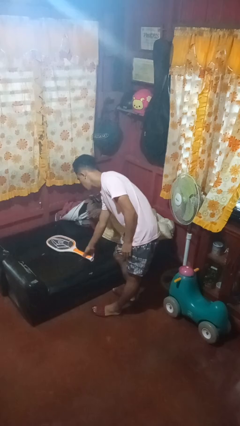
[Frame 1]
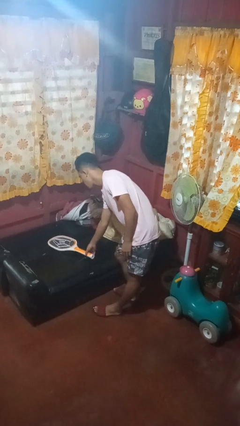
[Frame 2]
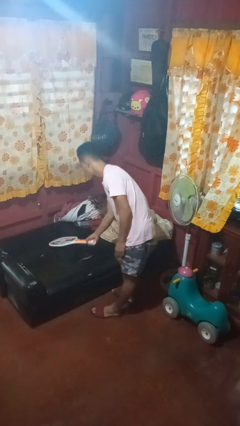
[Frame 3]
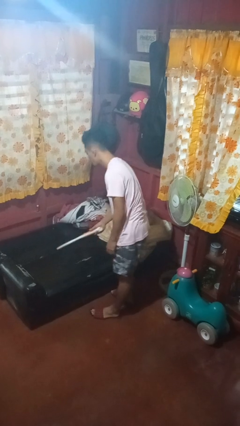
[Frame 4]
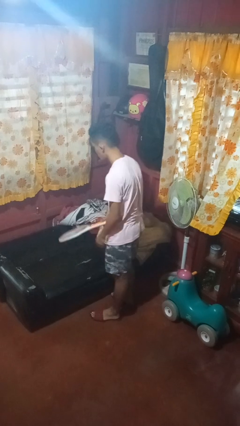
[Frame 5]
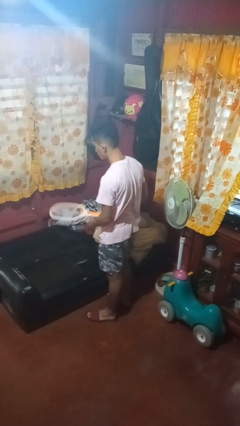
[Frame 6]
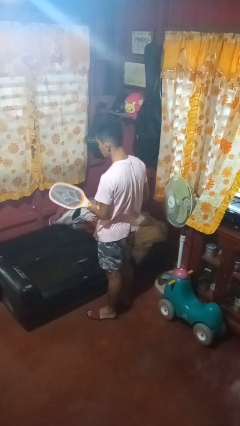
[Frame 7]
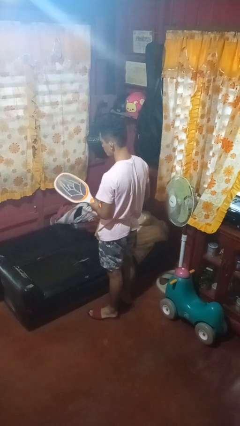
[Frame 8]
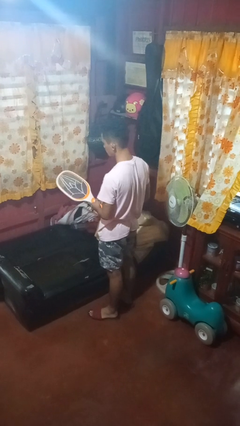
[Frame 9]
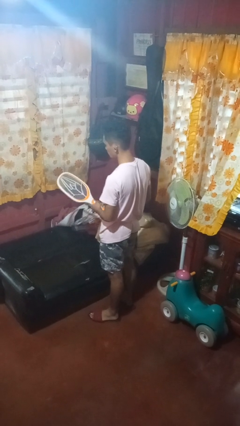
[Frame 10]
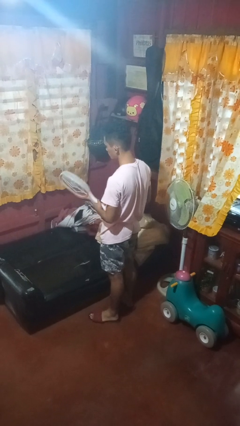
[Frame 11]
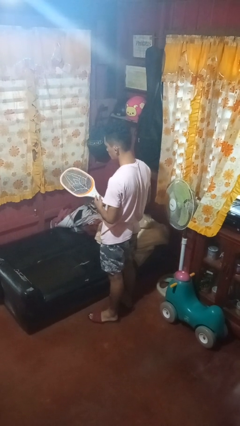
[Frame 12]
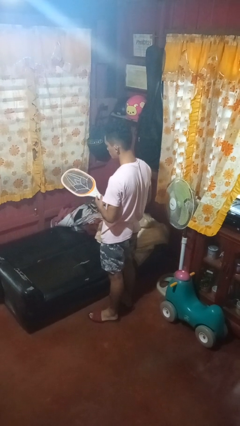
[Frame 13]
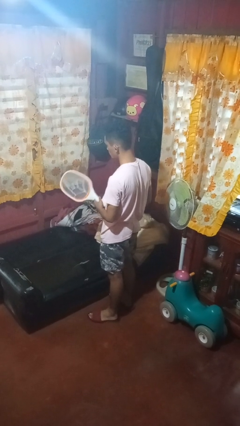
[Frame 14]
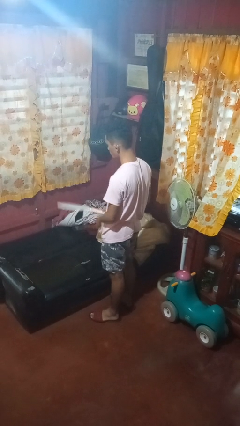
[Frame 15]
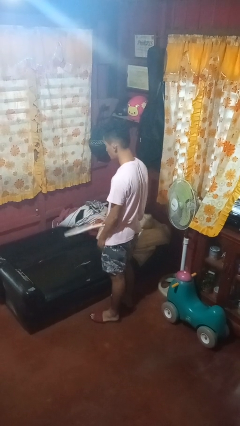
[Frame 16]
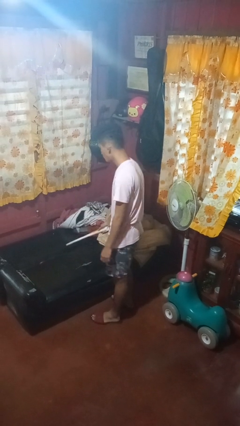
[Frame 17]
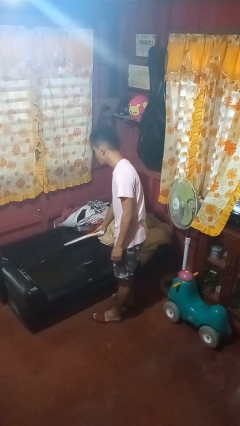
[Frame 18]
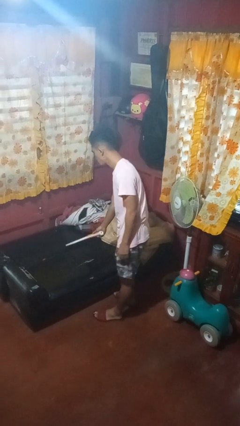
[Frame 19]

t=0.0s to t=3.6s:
person picks up object from couch

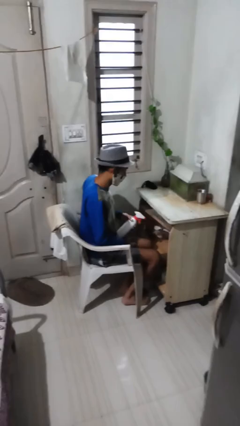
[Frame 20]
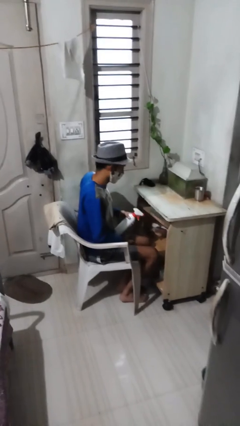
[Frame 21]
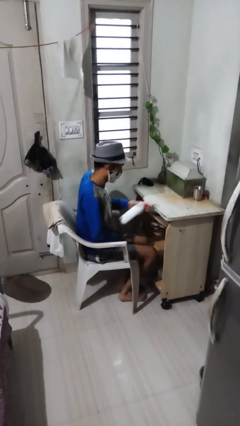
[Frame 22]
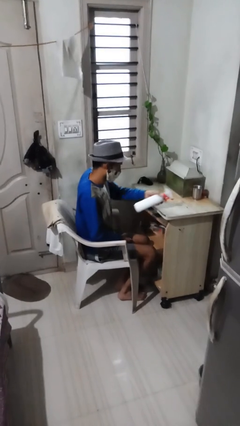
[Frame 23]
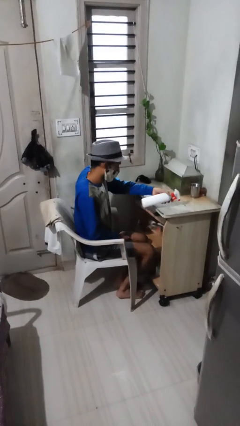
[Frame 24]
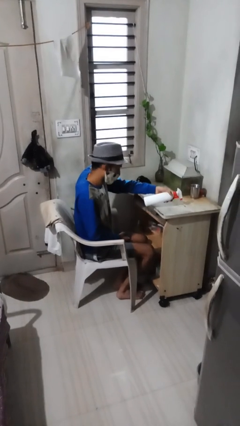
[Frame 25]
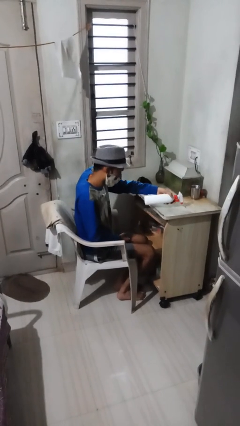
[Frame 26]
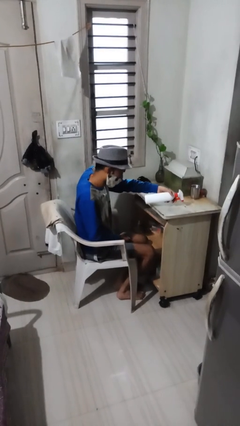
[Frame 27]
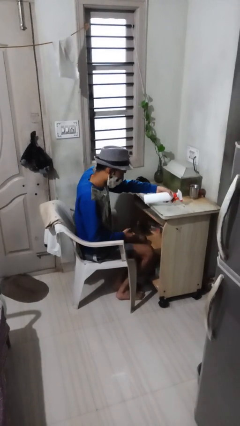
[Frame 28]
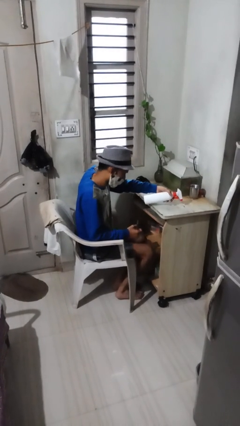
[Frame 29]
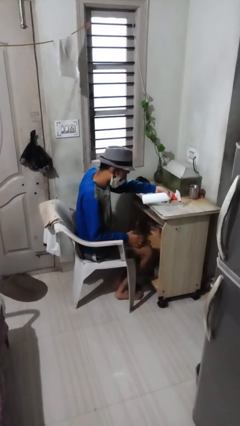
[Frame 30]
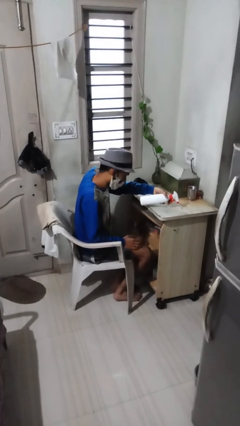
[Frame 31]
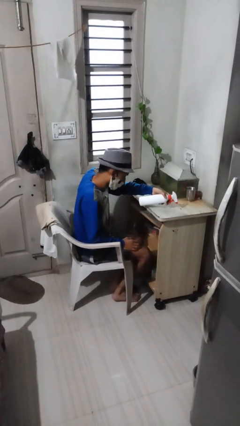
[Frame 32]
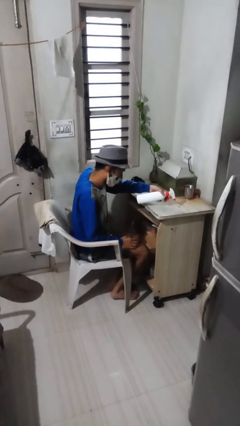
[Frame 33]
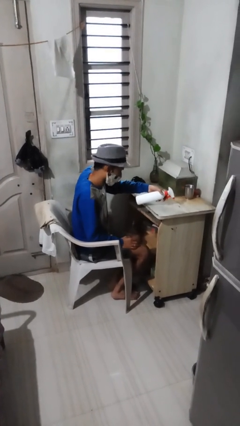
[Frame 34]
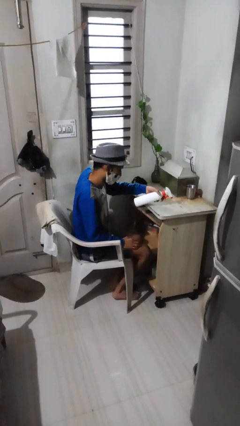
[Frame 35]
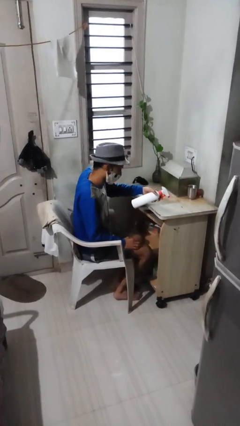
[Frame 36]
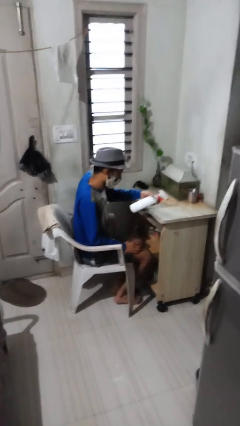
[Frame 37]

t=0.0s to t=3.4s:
person sprays from bottle

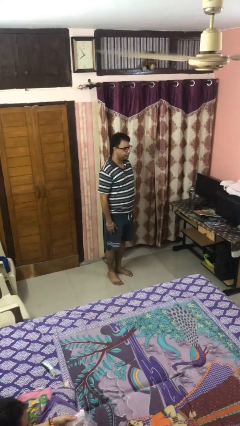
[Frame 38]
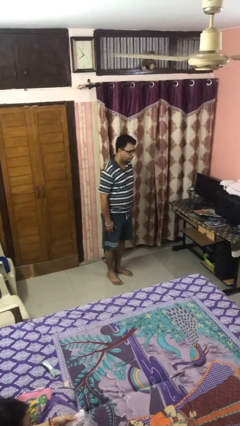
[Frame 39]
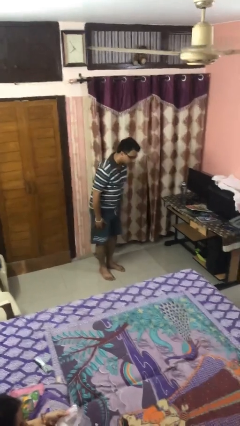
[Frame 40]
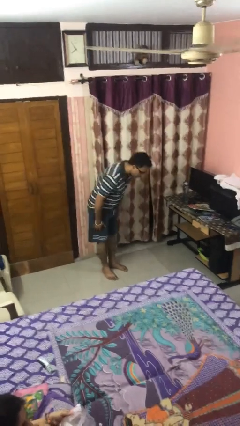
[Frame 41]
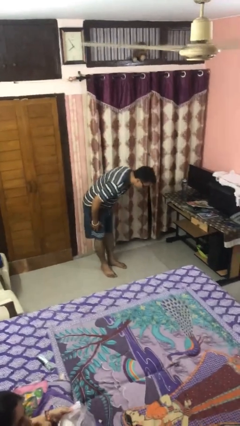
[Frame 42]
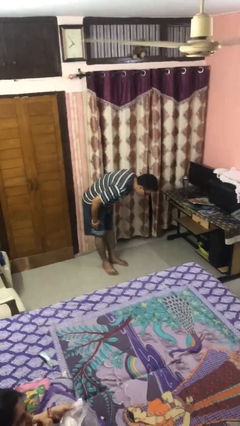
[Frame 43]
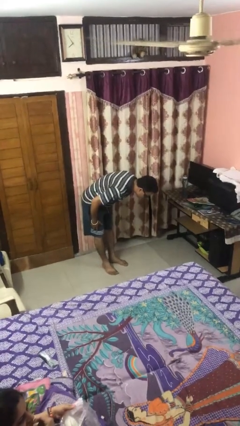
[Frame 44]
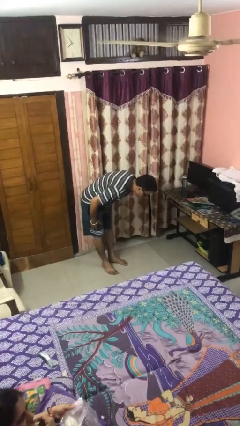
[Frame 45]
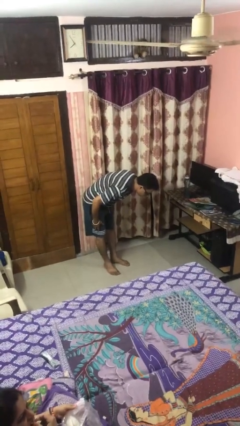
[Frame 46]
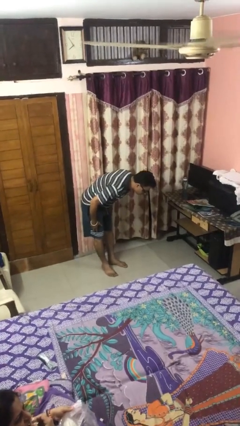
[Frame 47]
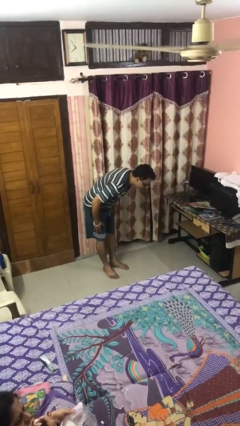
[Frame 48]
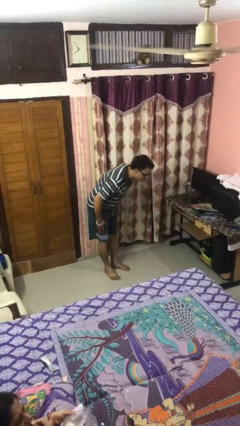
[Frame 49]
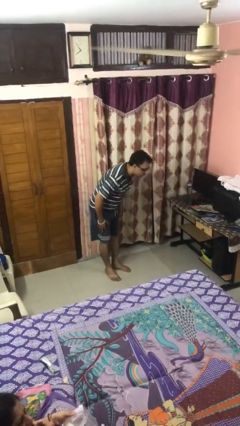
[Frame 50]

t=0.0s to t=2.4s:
person bows

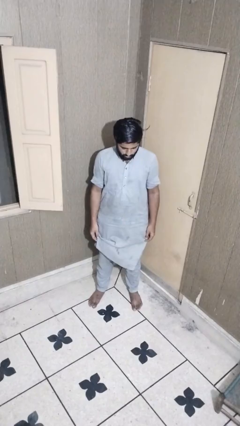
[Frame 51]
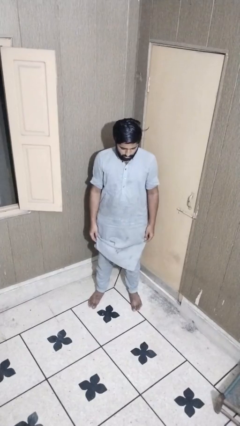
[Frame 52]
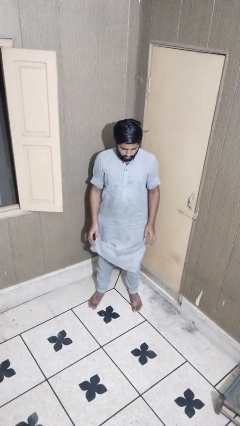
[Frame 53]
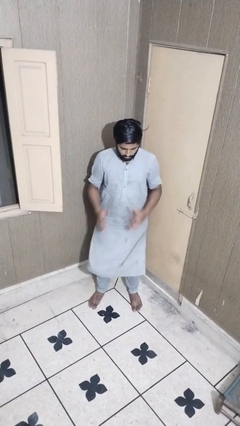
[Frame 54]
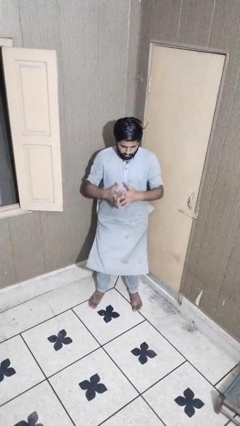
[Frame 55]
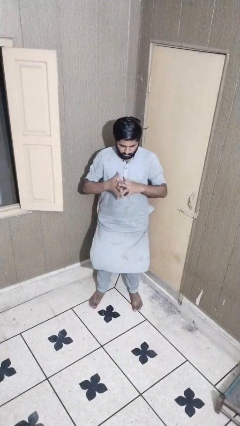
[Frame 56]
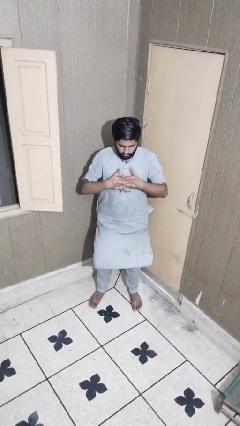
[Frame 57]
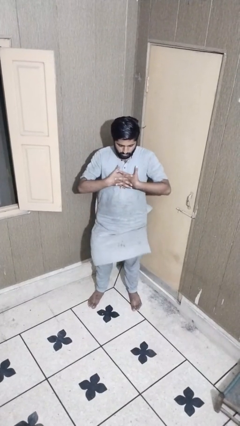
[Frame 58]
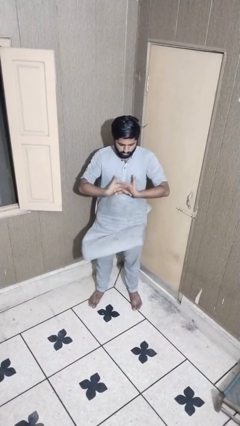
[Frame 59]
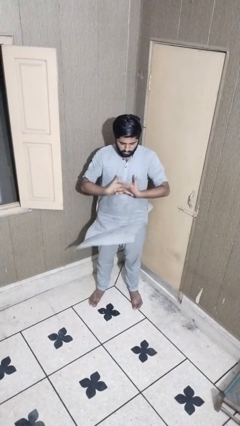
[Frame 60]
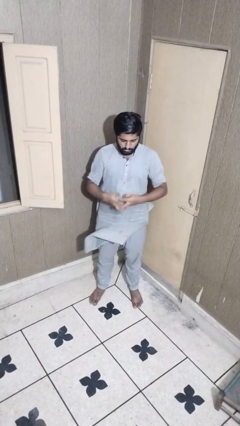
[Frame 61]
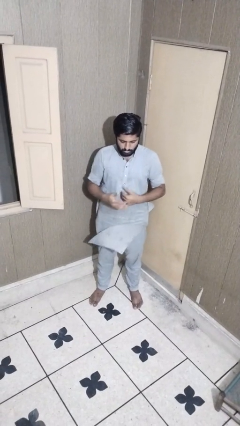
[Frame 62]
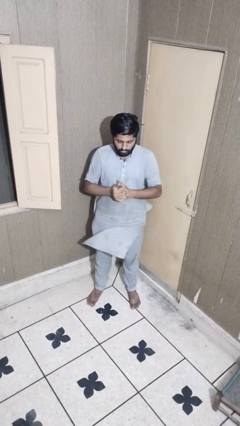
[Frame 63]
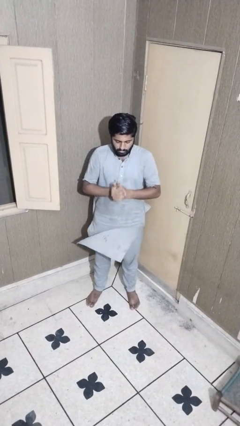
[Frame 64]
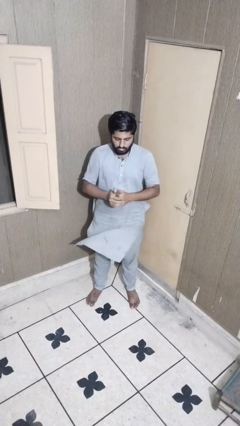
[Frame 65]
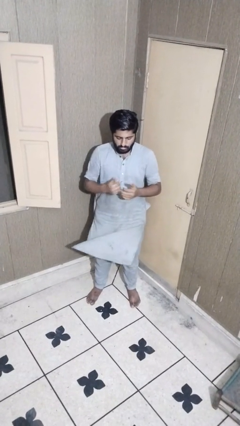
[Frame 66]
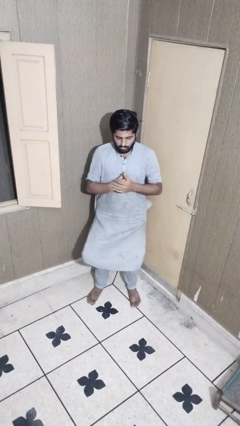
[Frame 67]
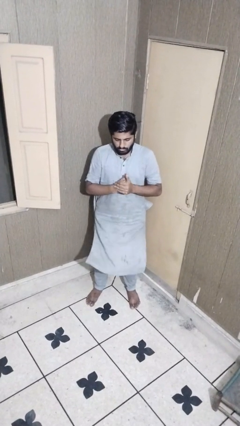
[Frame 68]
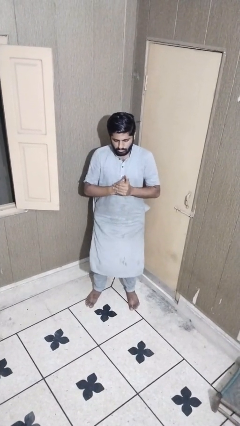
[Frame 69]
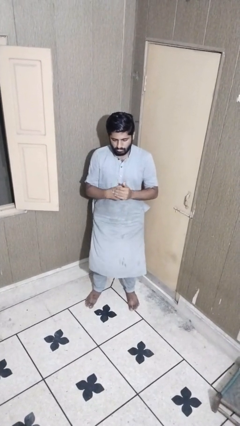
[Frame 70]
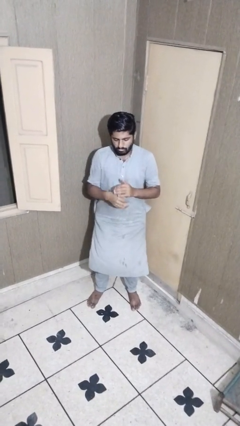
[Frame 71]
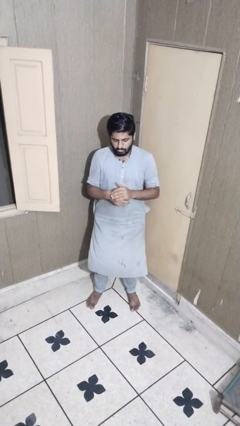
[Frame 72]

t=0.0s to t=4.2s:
person cracks knuckles

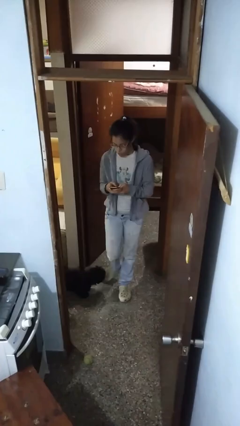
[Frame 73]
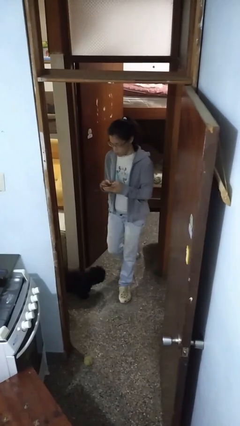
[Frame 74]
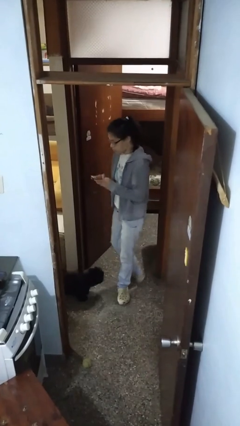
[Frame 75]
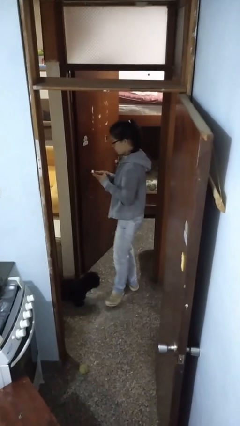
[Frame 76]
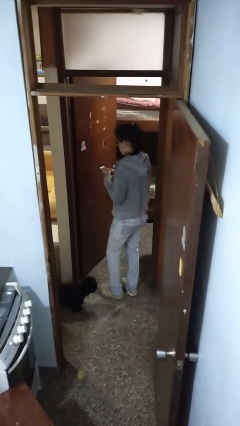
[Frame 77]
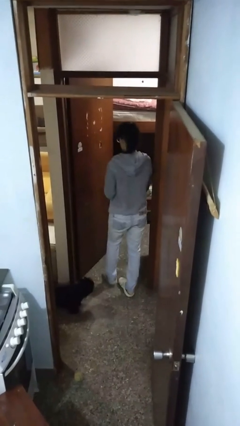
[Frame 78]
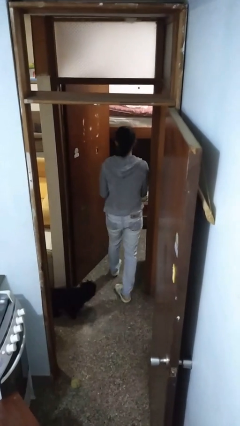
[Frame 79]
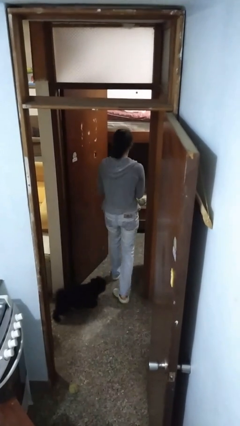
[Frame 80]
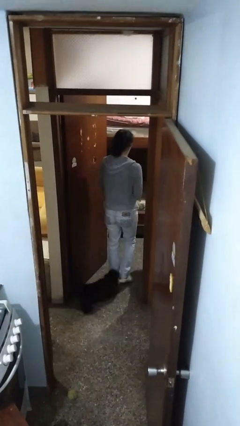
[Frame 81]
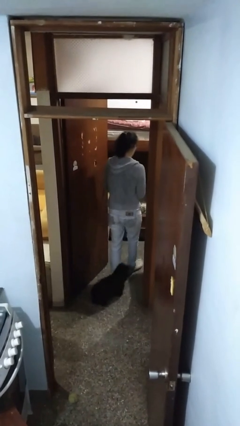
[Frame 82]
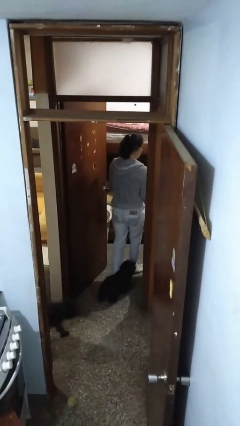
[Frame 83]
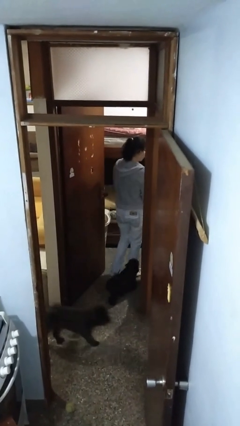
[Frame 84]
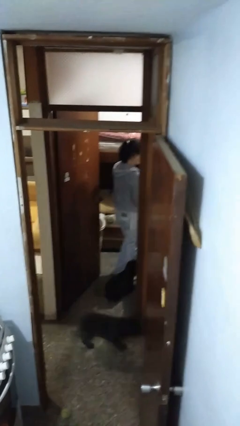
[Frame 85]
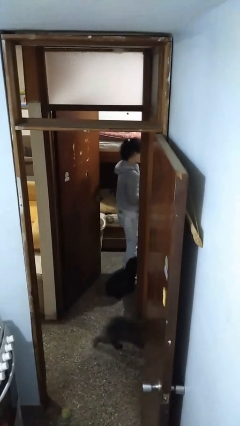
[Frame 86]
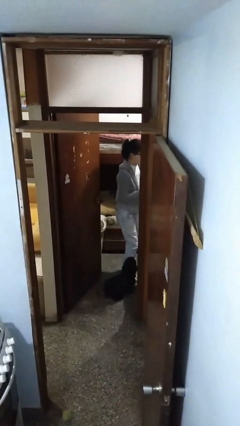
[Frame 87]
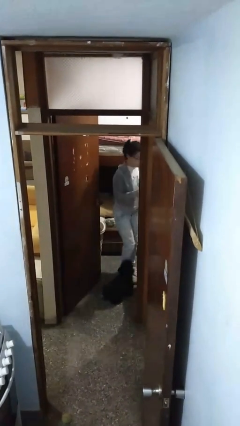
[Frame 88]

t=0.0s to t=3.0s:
person exits scene through structure

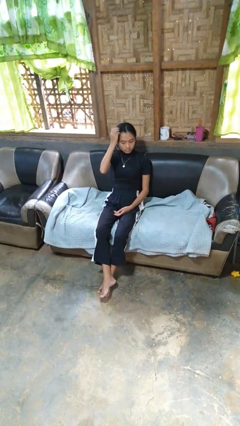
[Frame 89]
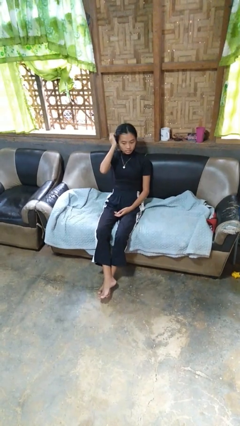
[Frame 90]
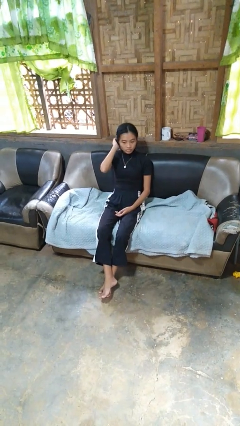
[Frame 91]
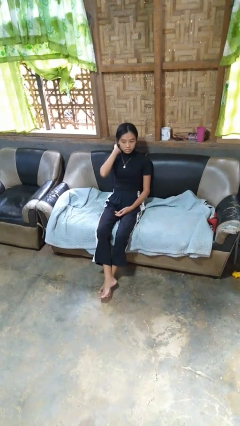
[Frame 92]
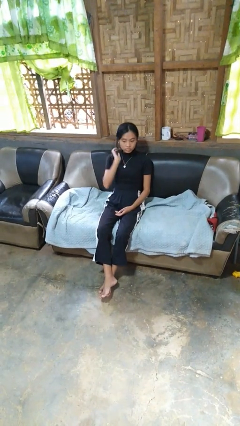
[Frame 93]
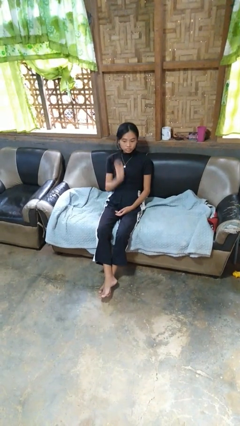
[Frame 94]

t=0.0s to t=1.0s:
person strokes hair
